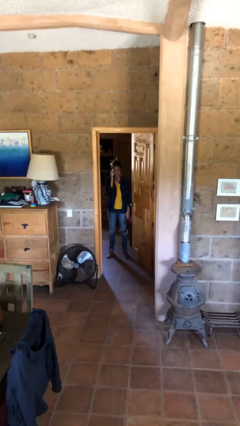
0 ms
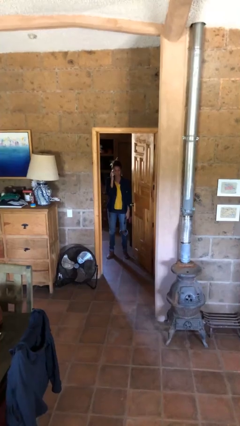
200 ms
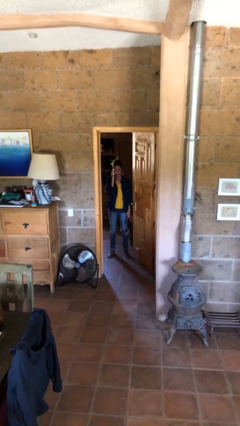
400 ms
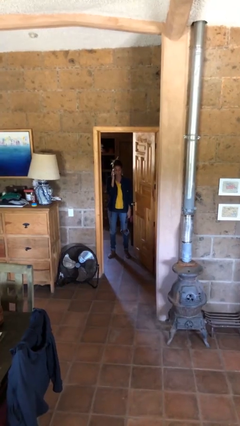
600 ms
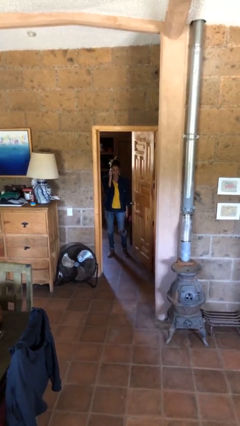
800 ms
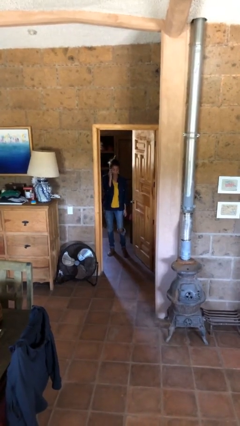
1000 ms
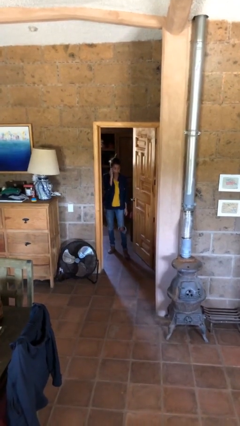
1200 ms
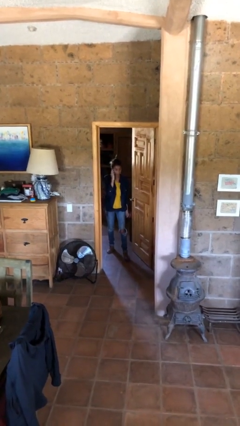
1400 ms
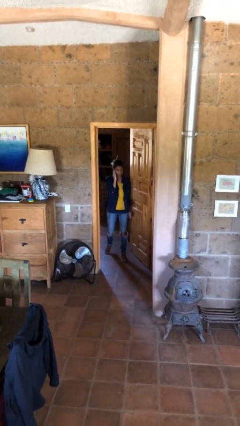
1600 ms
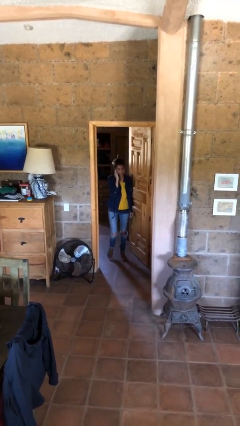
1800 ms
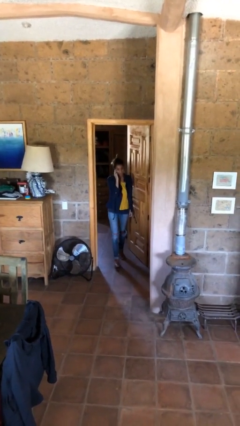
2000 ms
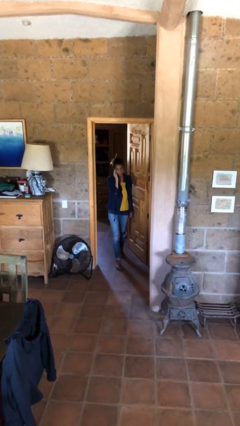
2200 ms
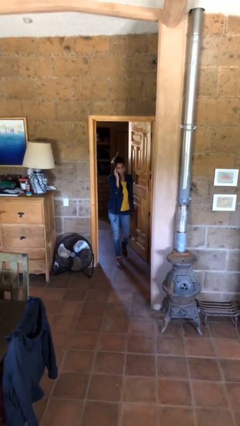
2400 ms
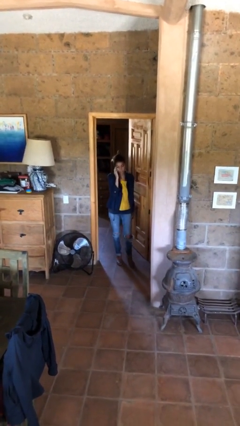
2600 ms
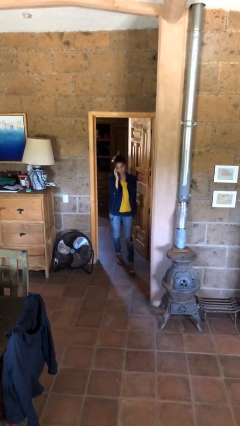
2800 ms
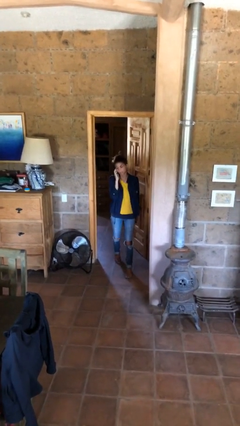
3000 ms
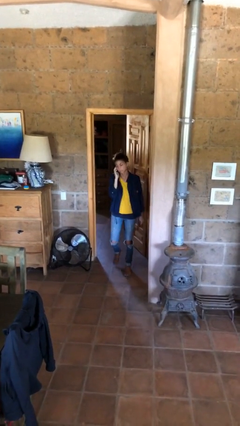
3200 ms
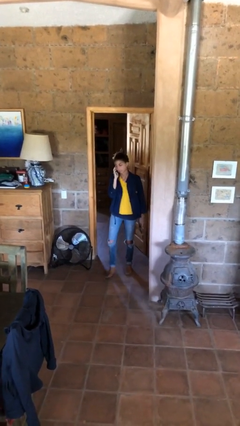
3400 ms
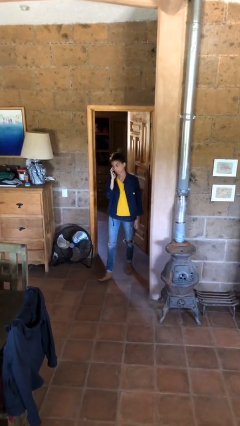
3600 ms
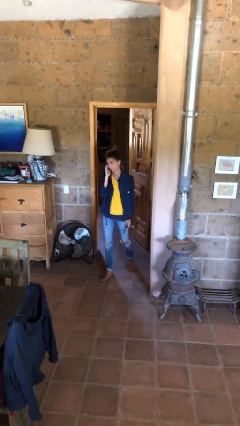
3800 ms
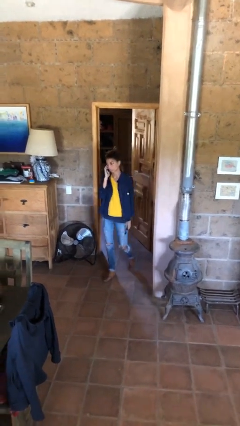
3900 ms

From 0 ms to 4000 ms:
person enters scene through structure

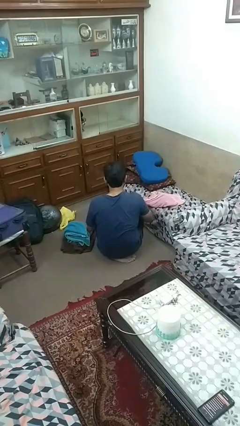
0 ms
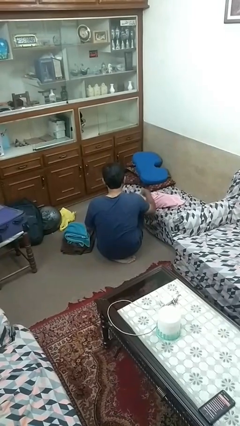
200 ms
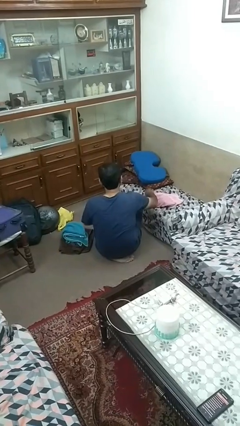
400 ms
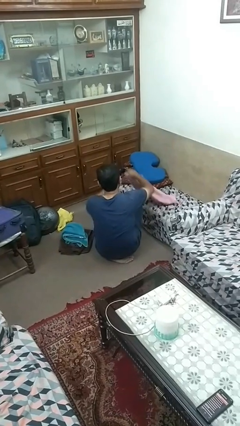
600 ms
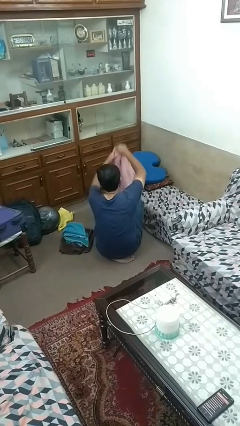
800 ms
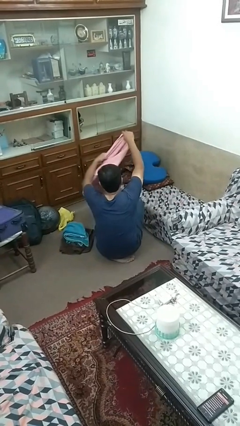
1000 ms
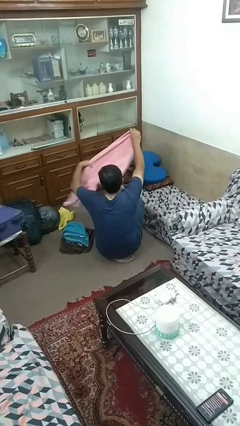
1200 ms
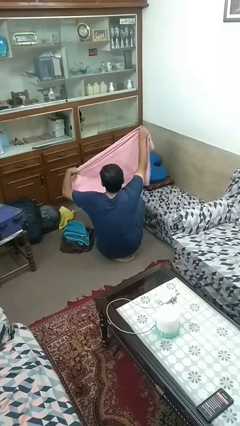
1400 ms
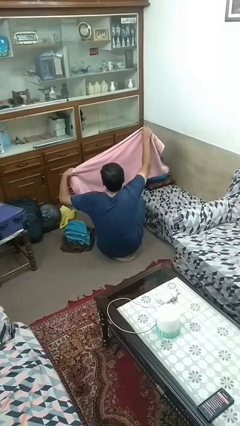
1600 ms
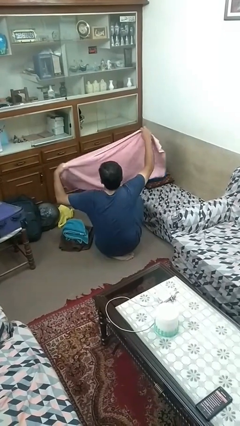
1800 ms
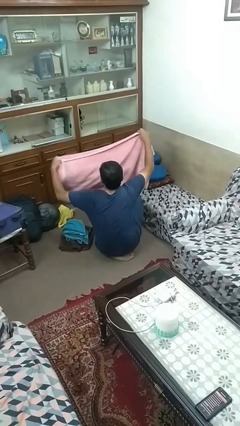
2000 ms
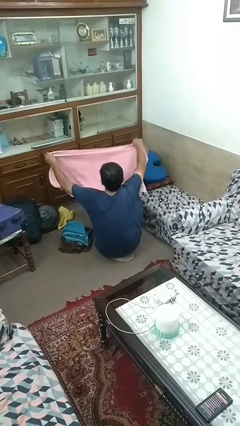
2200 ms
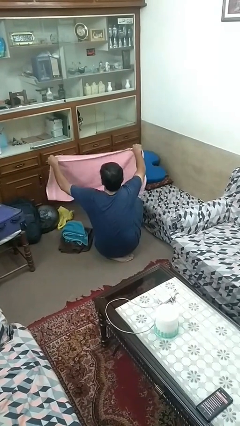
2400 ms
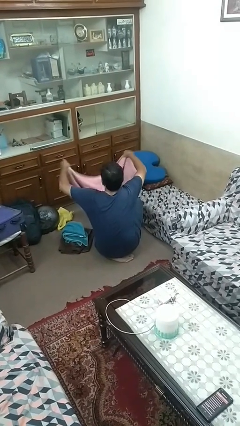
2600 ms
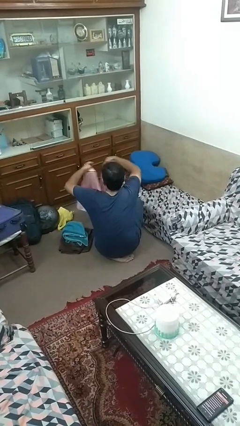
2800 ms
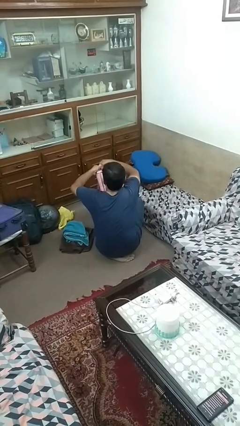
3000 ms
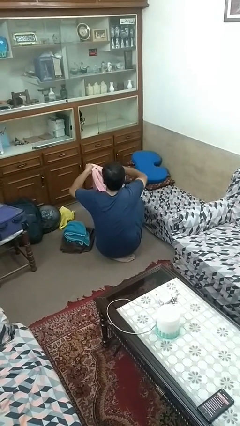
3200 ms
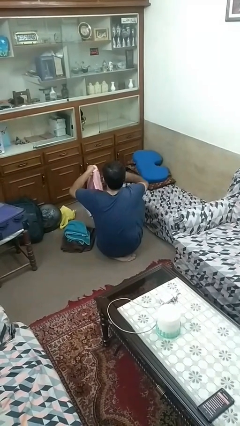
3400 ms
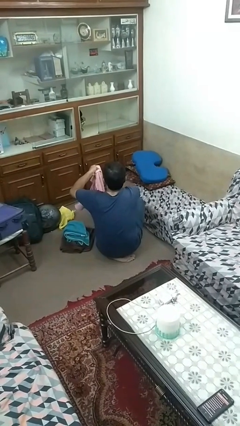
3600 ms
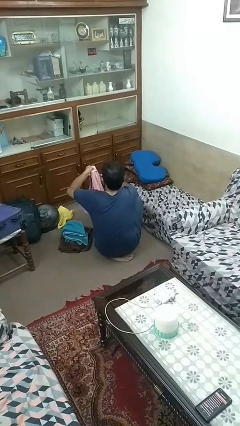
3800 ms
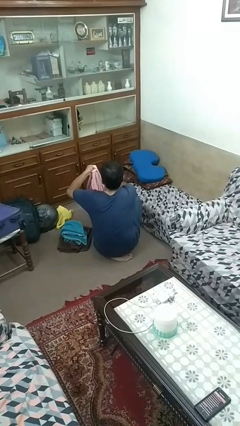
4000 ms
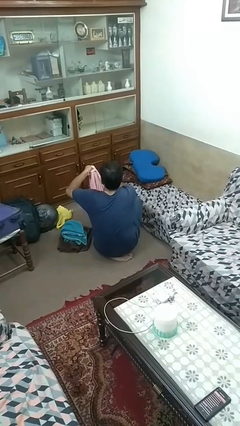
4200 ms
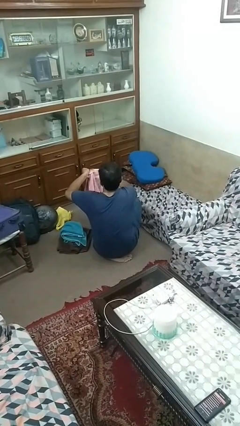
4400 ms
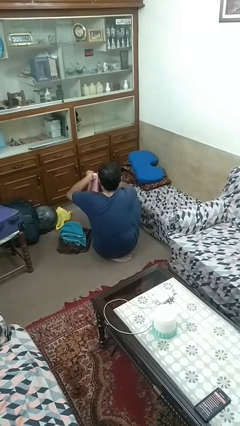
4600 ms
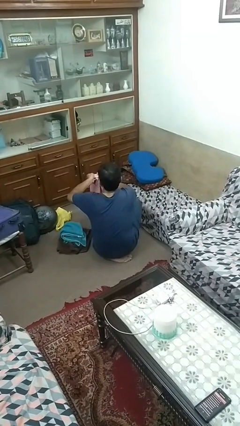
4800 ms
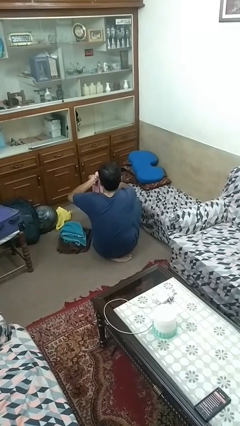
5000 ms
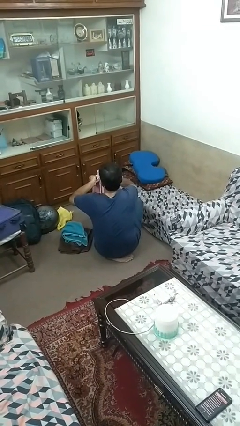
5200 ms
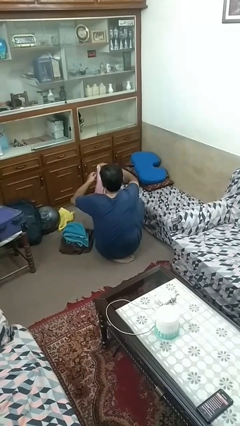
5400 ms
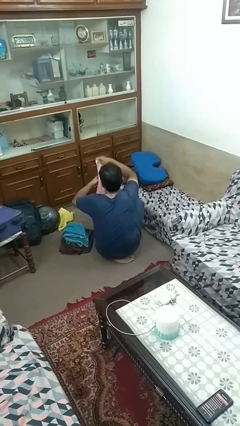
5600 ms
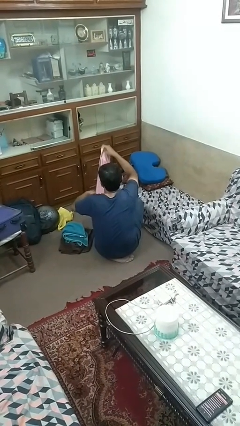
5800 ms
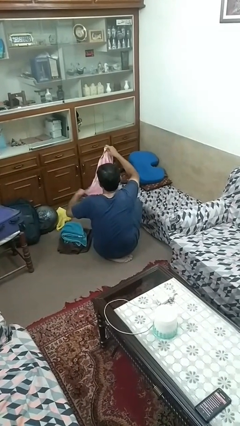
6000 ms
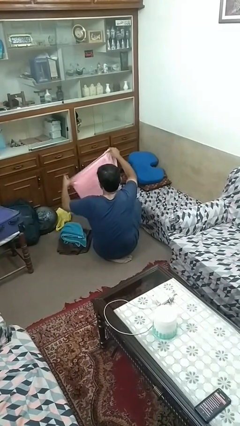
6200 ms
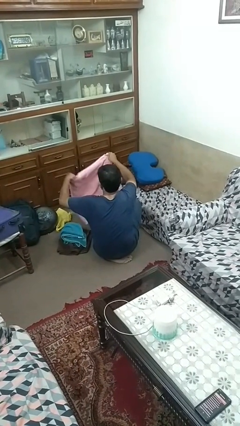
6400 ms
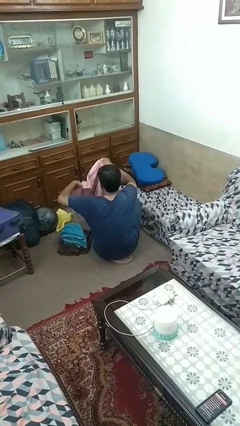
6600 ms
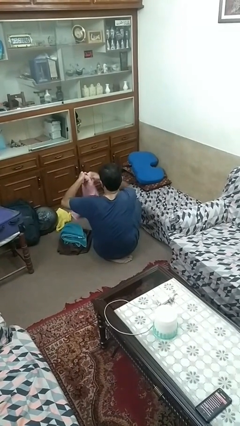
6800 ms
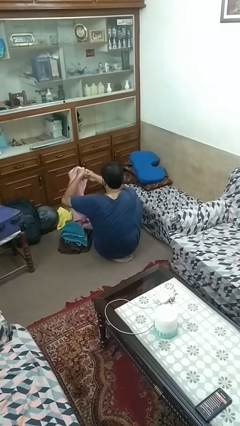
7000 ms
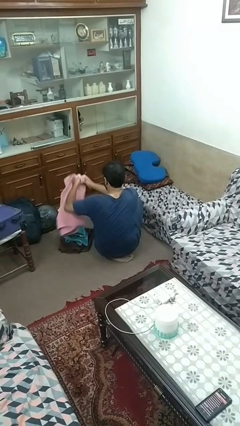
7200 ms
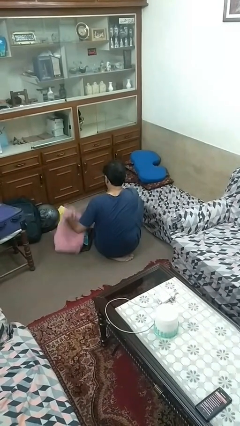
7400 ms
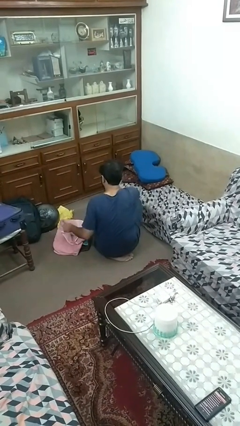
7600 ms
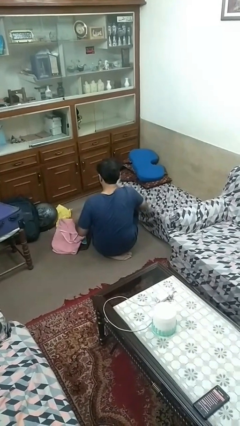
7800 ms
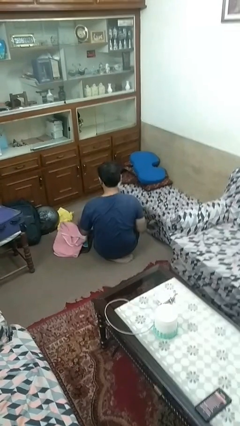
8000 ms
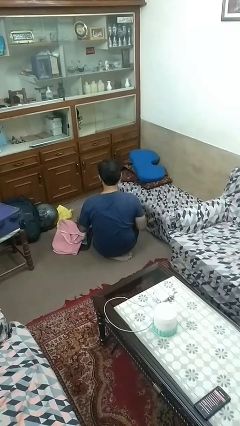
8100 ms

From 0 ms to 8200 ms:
person folds towel

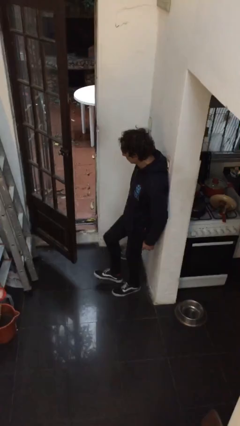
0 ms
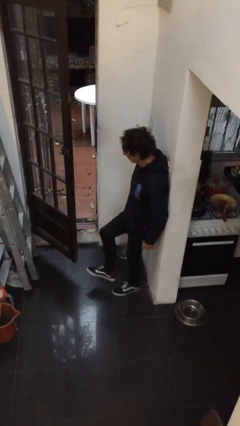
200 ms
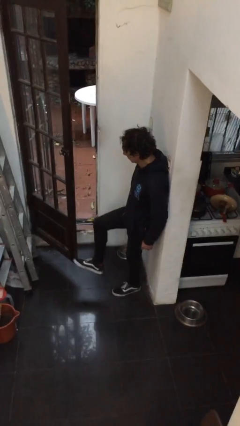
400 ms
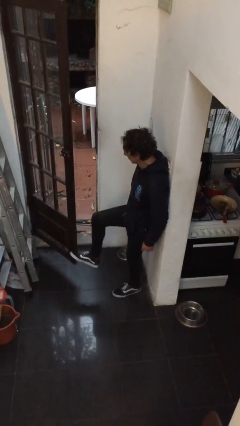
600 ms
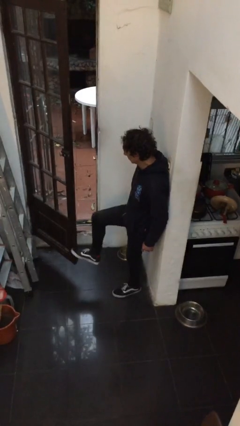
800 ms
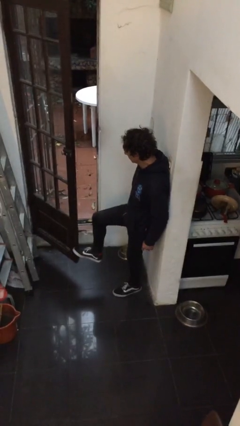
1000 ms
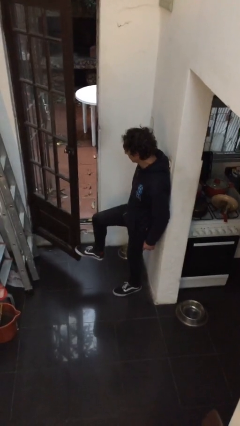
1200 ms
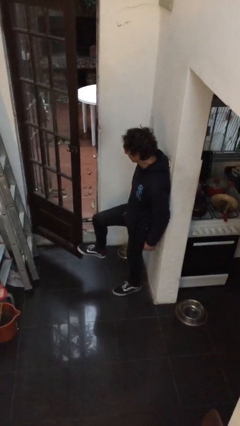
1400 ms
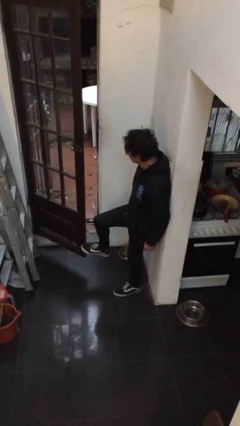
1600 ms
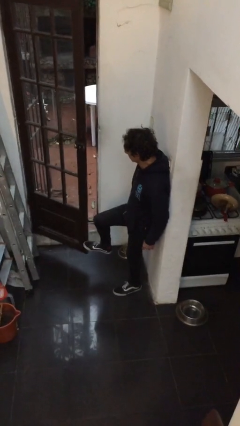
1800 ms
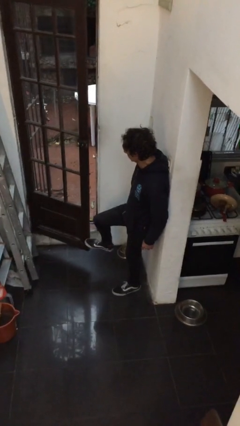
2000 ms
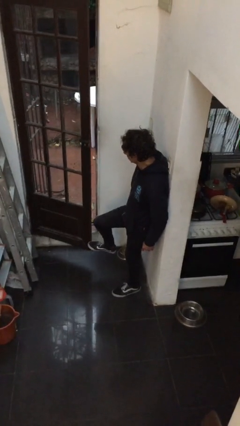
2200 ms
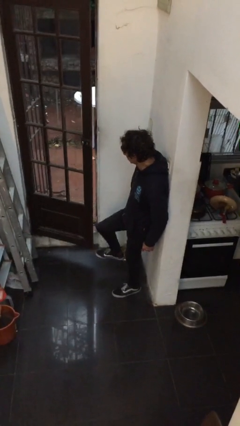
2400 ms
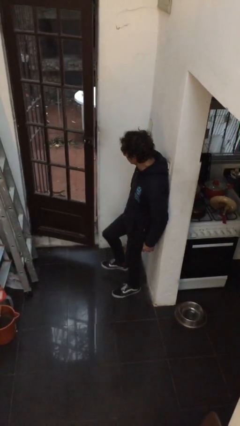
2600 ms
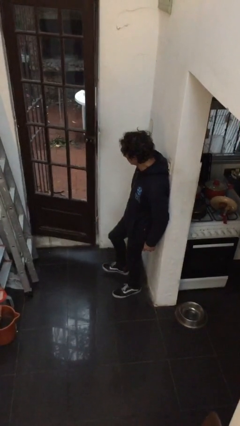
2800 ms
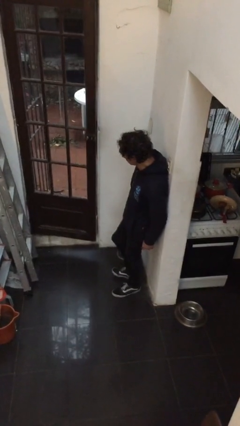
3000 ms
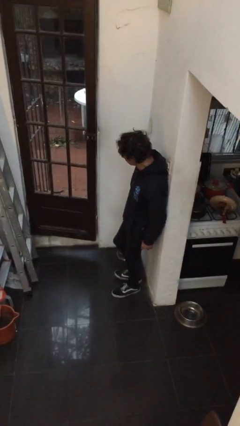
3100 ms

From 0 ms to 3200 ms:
person closes door with foot

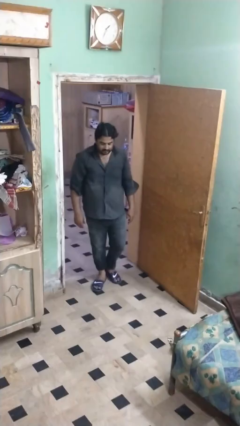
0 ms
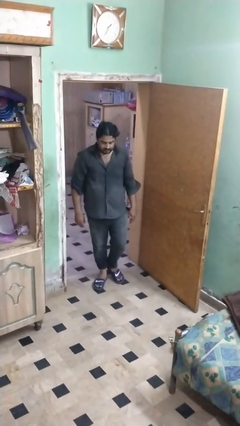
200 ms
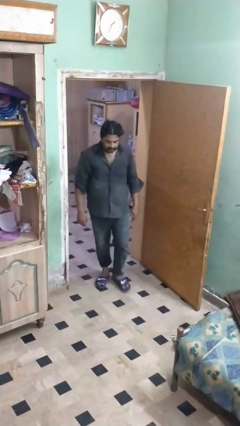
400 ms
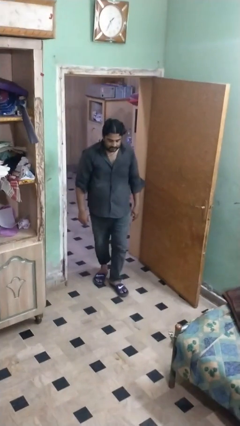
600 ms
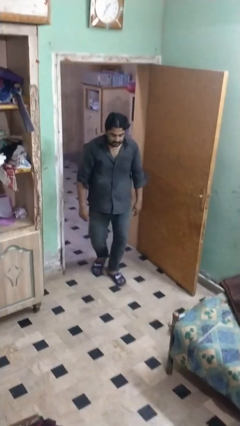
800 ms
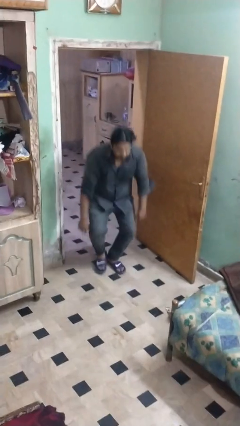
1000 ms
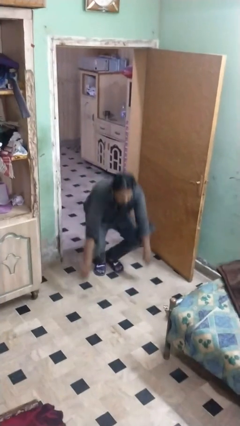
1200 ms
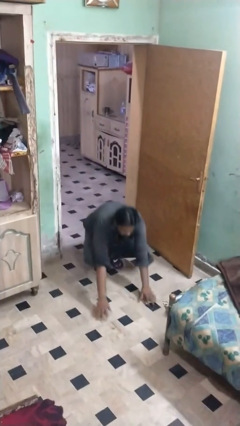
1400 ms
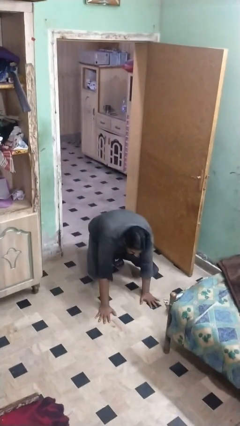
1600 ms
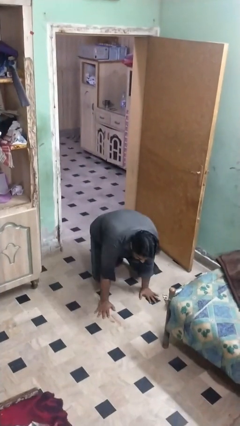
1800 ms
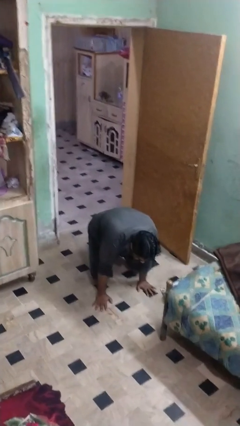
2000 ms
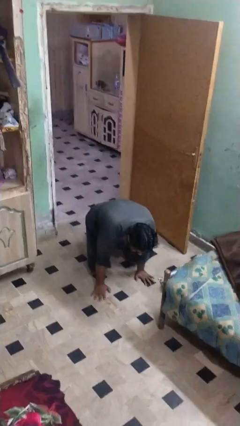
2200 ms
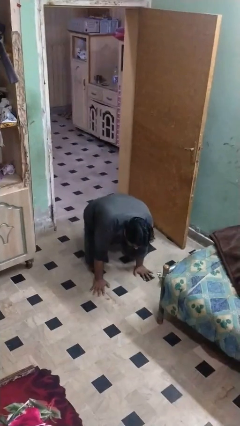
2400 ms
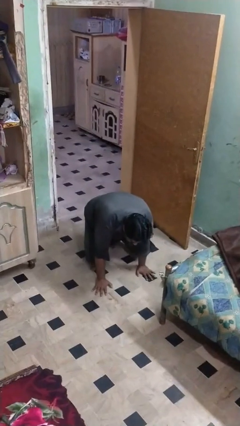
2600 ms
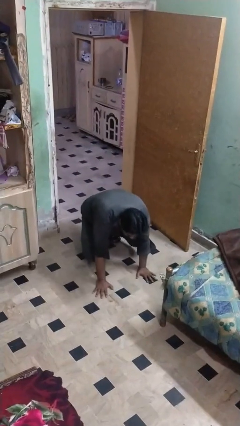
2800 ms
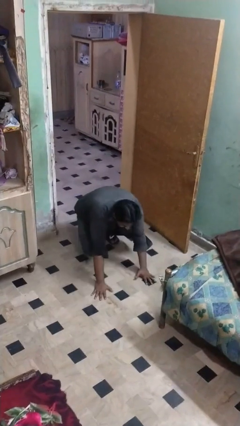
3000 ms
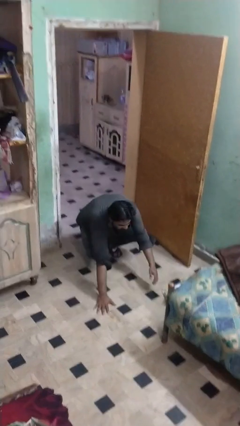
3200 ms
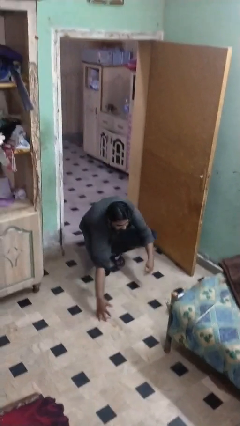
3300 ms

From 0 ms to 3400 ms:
person trips on object on floor
